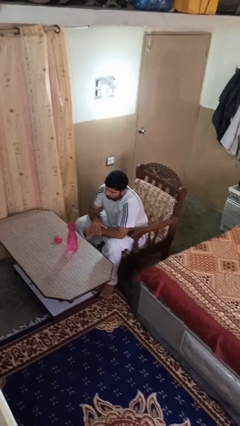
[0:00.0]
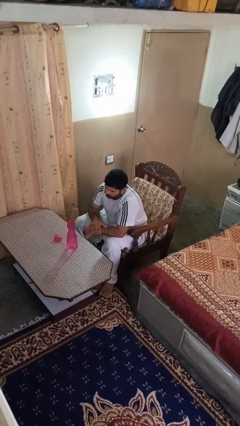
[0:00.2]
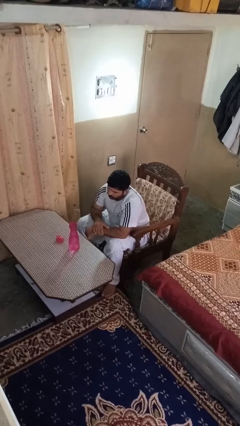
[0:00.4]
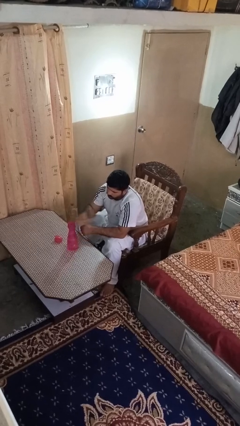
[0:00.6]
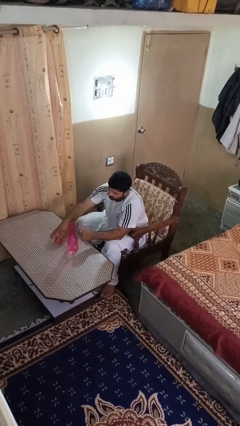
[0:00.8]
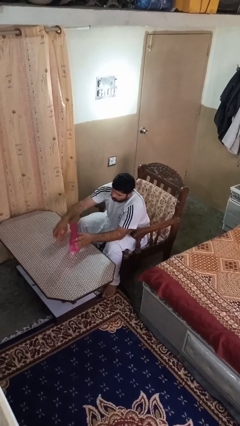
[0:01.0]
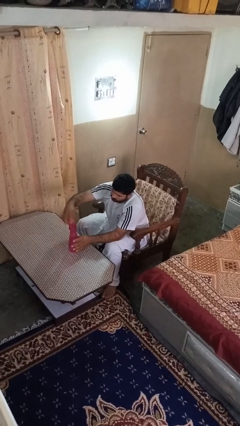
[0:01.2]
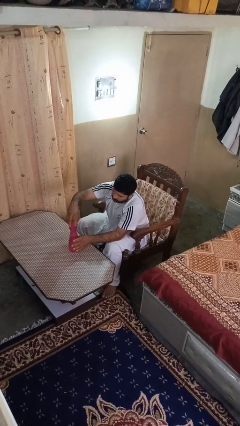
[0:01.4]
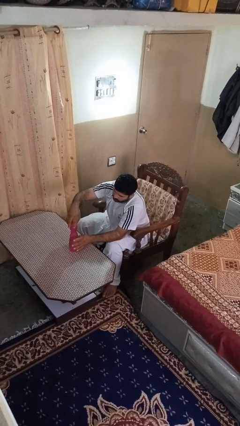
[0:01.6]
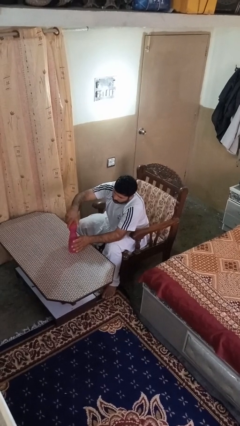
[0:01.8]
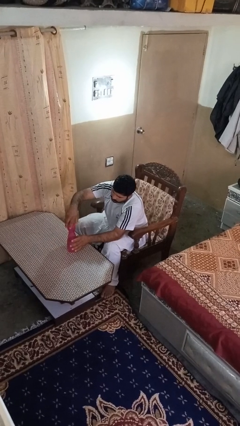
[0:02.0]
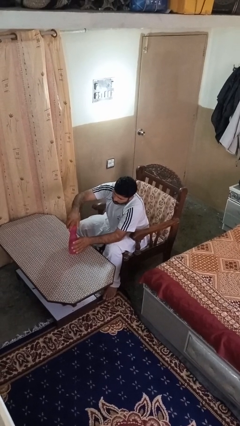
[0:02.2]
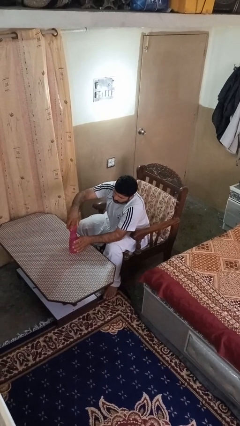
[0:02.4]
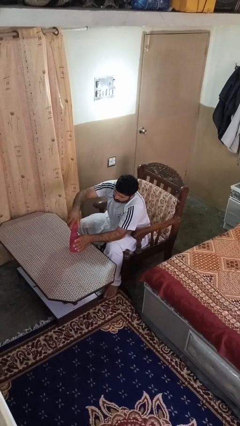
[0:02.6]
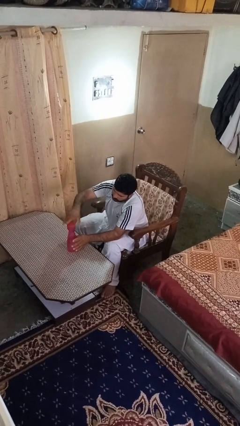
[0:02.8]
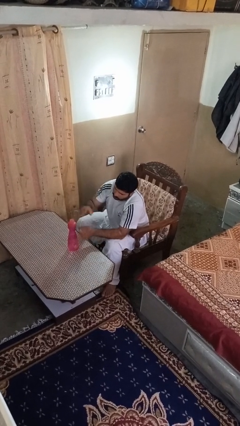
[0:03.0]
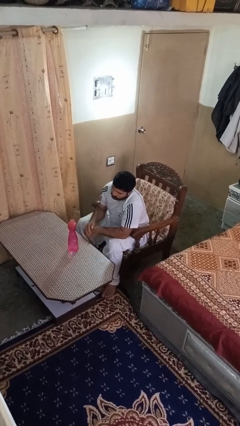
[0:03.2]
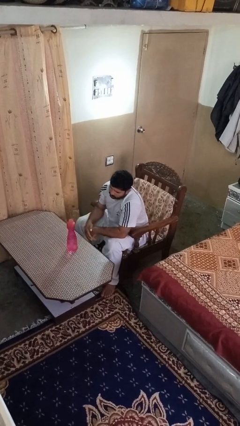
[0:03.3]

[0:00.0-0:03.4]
person screws lid to bottle

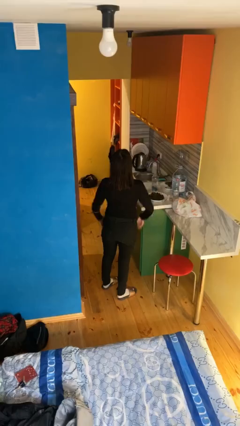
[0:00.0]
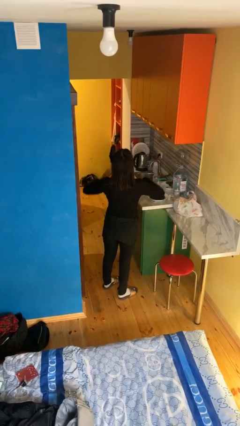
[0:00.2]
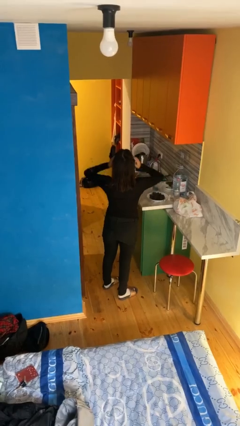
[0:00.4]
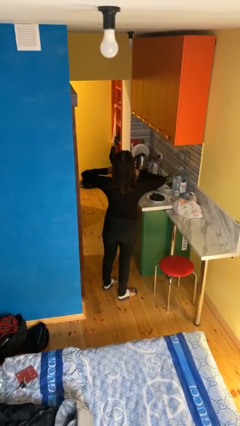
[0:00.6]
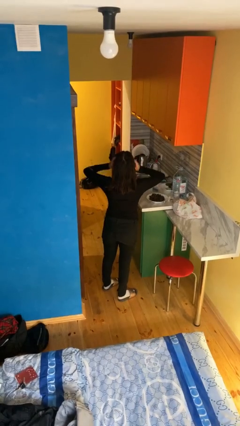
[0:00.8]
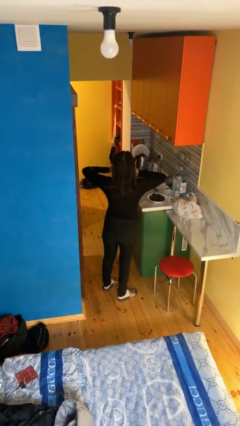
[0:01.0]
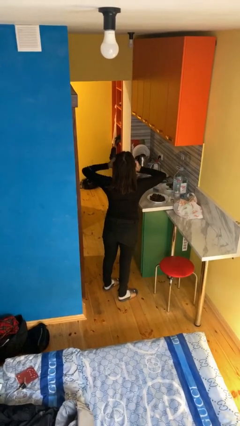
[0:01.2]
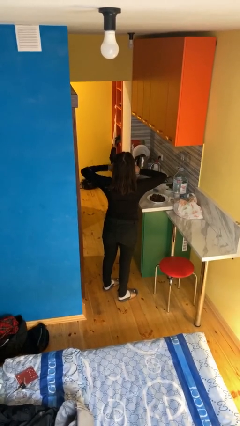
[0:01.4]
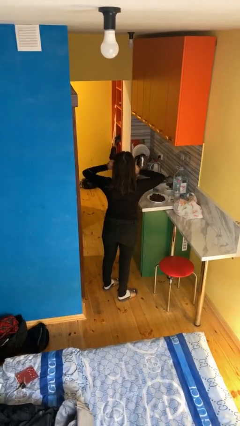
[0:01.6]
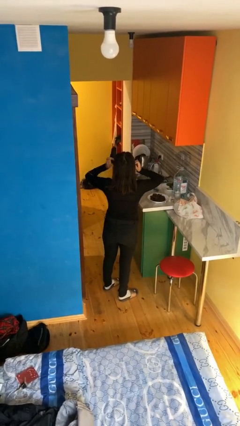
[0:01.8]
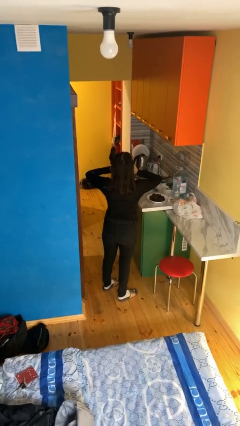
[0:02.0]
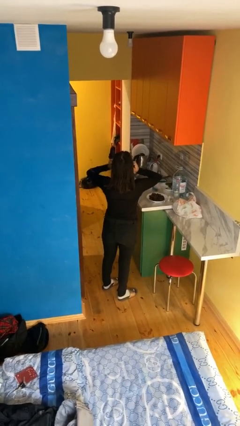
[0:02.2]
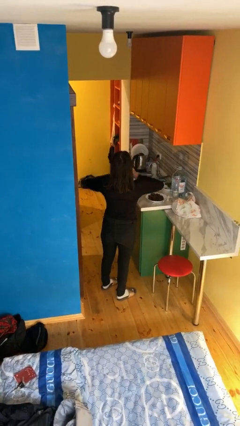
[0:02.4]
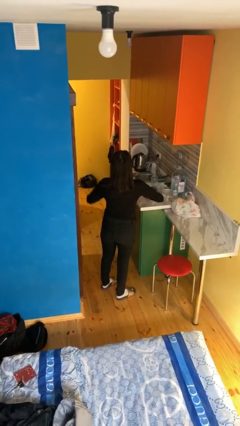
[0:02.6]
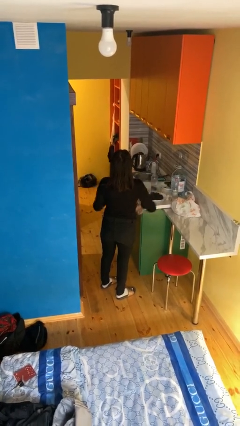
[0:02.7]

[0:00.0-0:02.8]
person scratches face

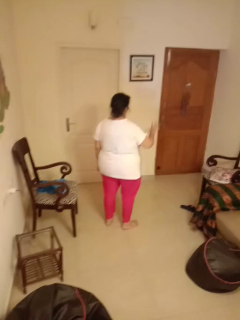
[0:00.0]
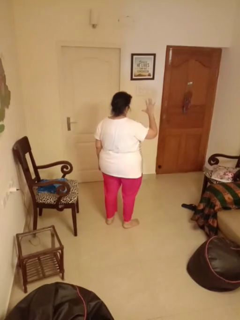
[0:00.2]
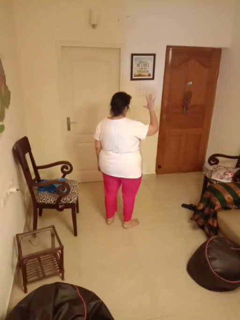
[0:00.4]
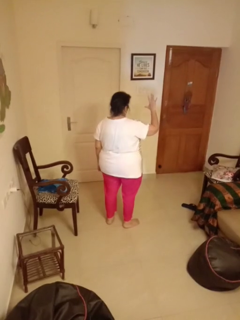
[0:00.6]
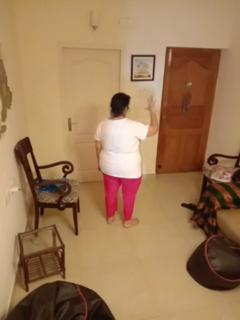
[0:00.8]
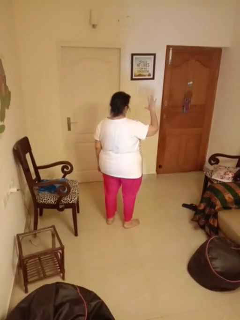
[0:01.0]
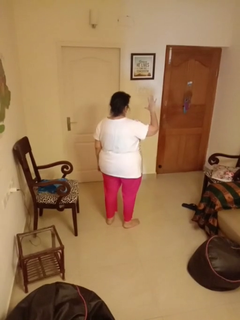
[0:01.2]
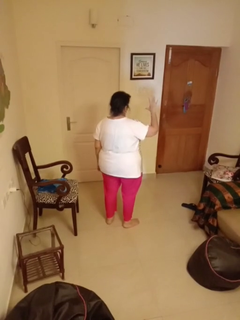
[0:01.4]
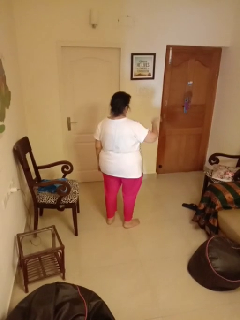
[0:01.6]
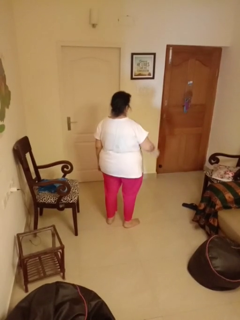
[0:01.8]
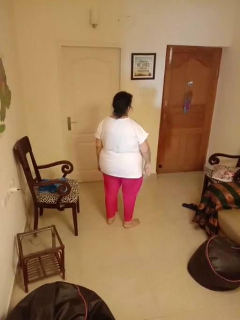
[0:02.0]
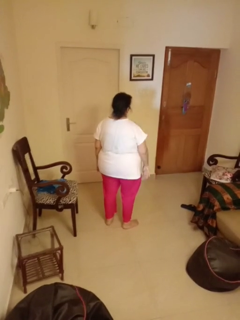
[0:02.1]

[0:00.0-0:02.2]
person gestures number five

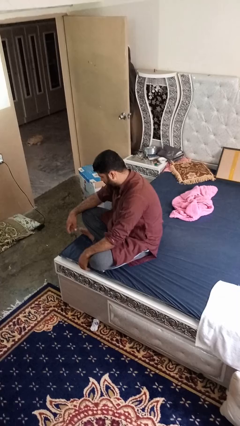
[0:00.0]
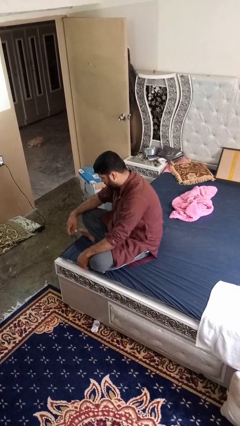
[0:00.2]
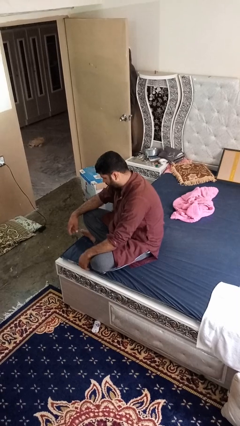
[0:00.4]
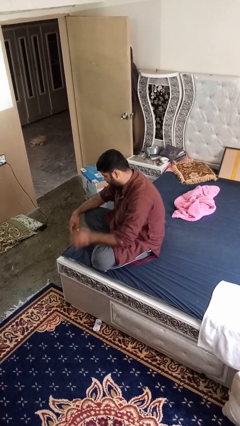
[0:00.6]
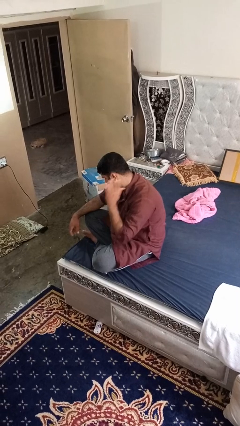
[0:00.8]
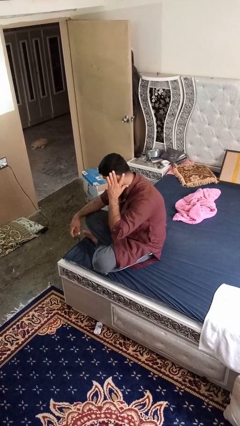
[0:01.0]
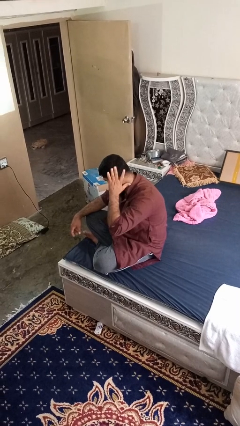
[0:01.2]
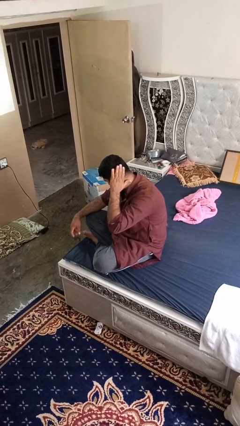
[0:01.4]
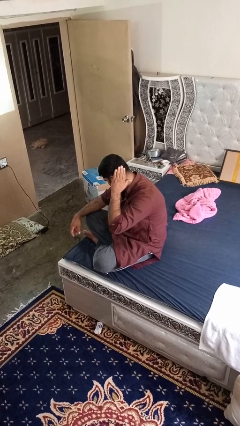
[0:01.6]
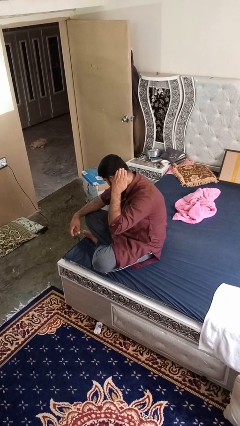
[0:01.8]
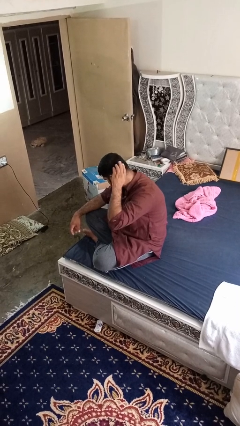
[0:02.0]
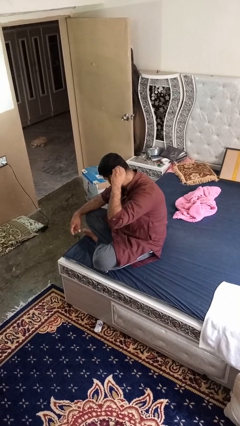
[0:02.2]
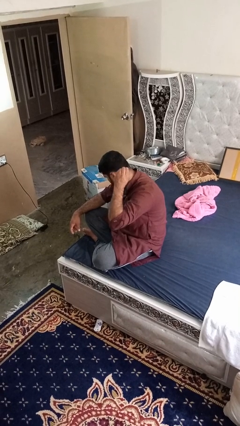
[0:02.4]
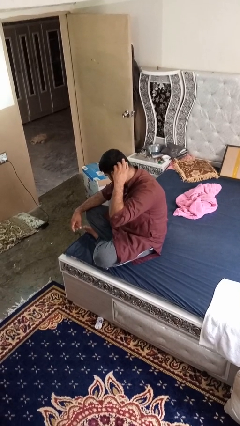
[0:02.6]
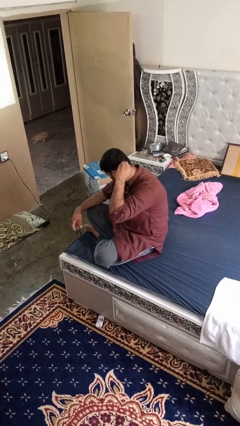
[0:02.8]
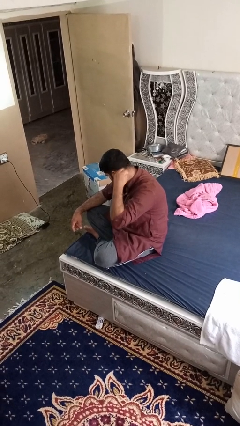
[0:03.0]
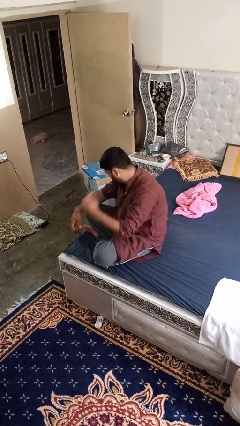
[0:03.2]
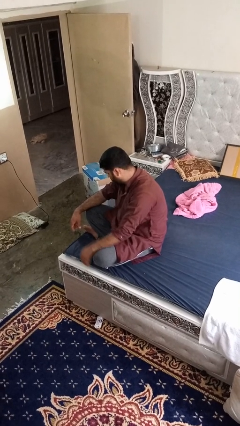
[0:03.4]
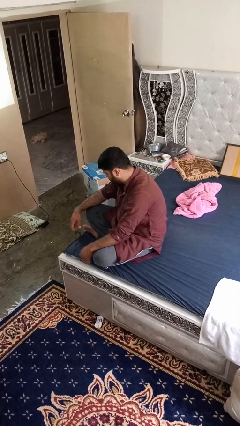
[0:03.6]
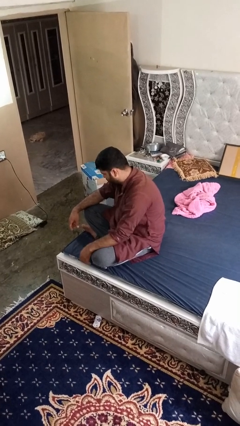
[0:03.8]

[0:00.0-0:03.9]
person strokes hair

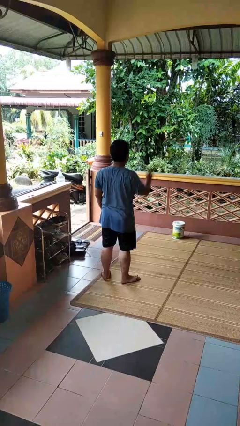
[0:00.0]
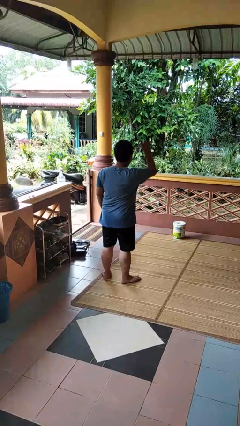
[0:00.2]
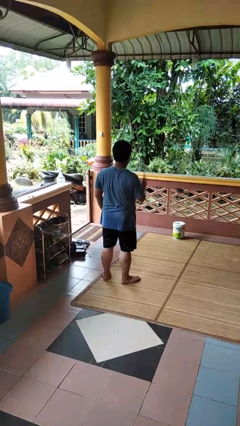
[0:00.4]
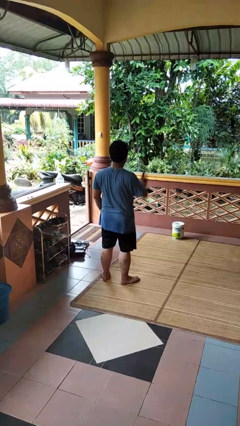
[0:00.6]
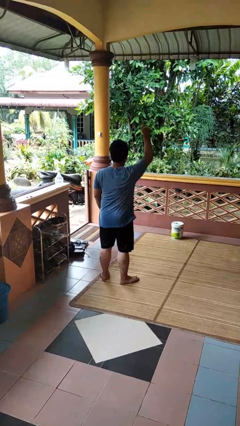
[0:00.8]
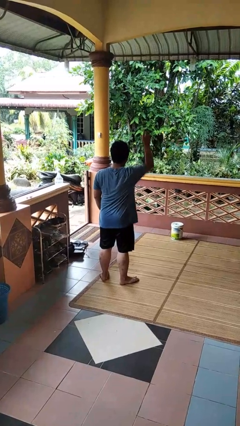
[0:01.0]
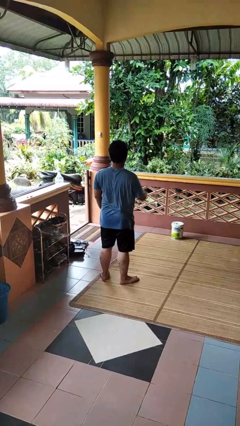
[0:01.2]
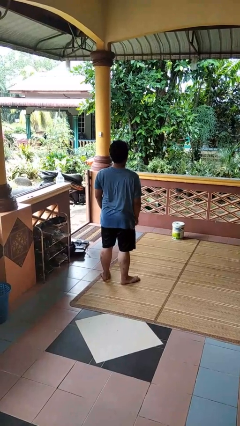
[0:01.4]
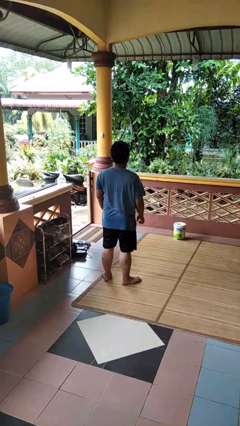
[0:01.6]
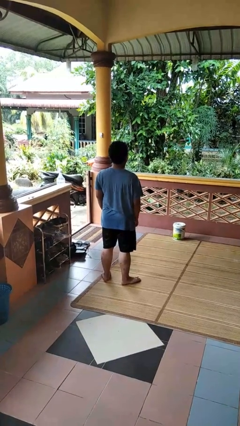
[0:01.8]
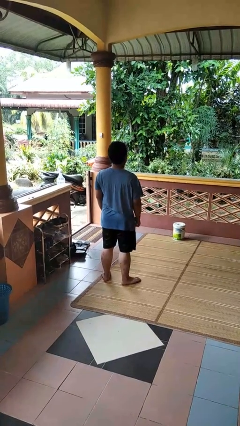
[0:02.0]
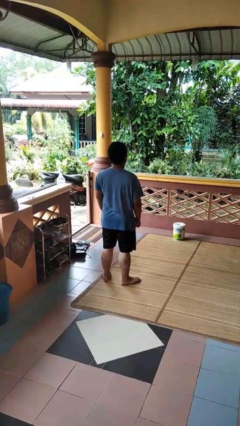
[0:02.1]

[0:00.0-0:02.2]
person dances in place

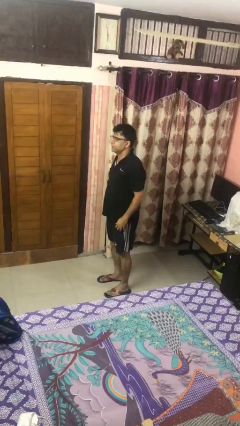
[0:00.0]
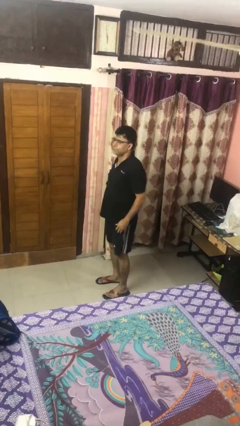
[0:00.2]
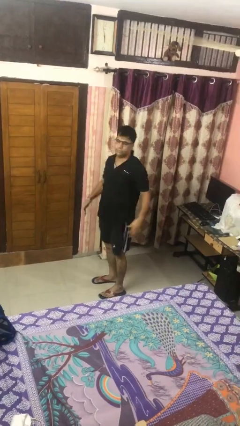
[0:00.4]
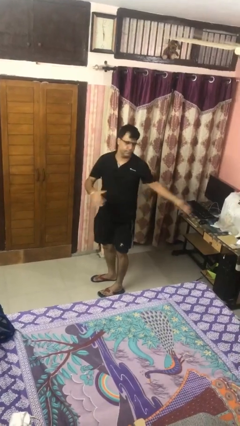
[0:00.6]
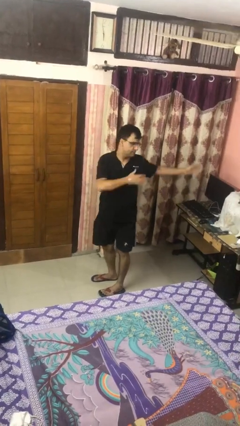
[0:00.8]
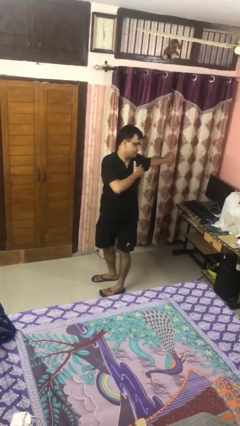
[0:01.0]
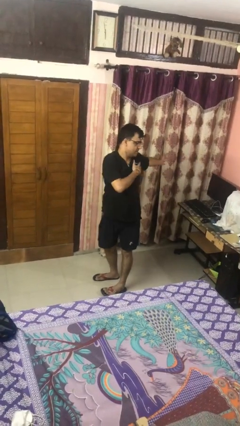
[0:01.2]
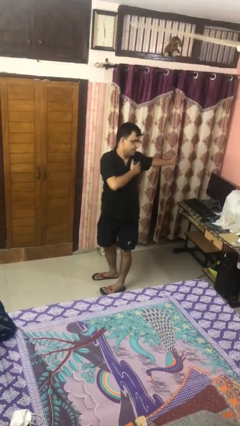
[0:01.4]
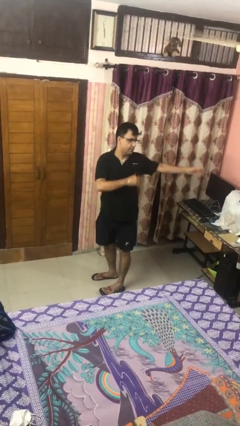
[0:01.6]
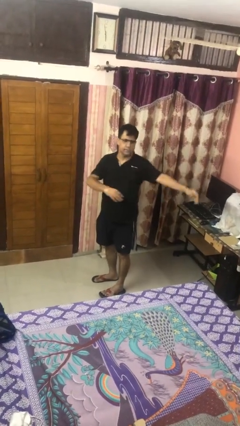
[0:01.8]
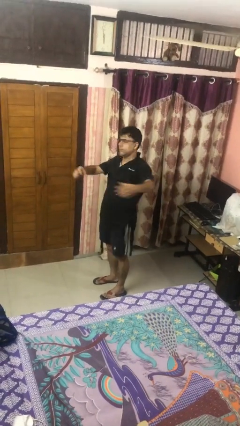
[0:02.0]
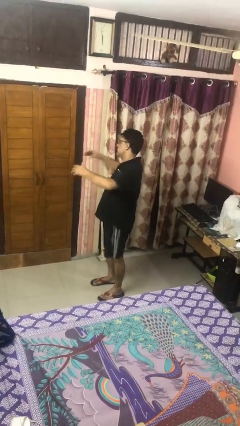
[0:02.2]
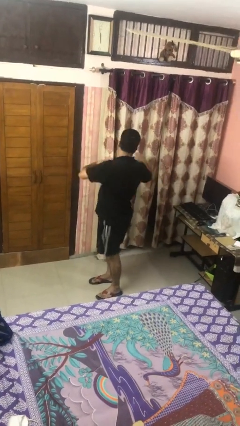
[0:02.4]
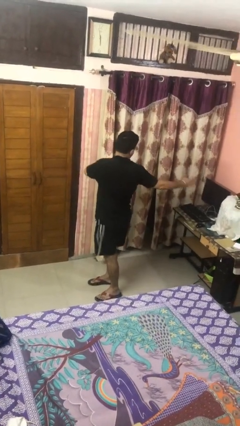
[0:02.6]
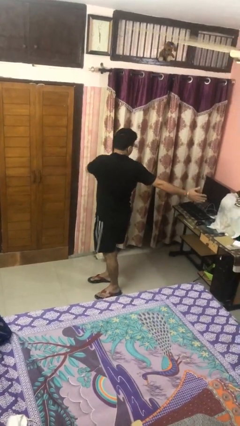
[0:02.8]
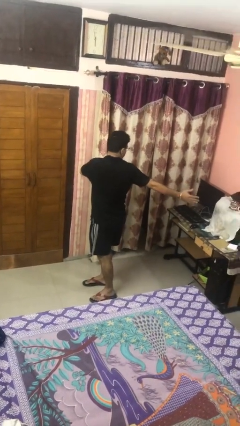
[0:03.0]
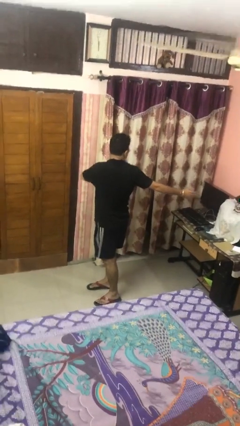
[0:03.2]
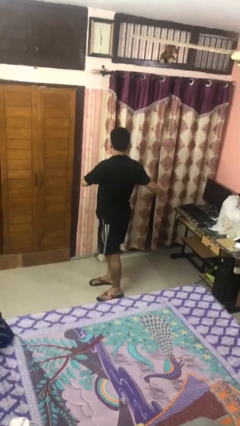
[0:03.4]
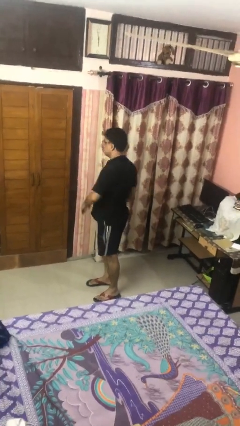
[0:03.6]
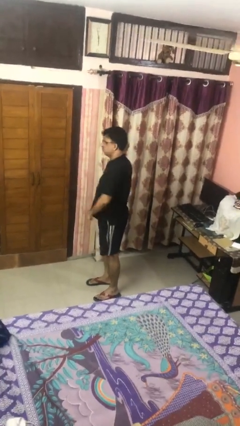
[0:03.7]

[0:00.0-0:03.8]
person stretches arms to side
